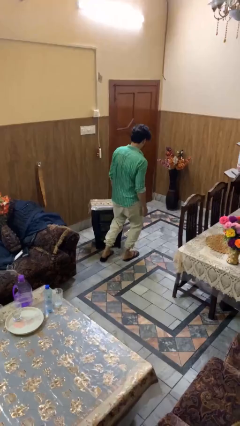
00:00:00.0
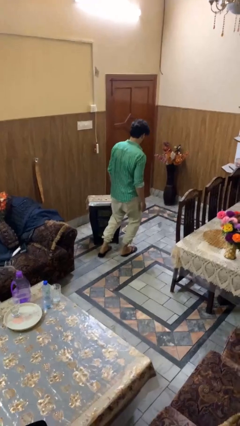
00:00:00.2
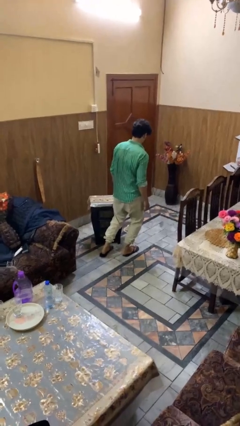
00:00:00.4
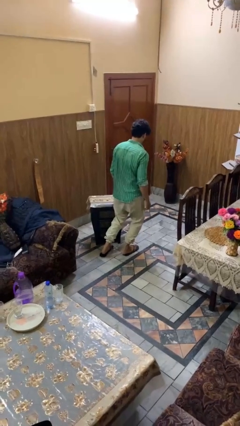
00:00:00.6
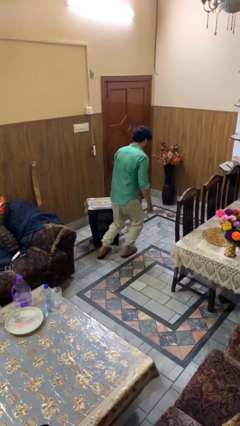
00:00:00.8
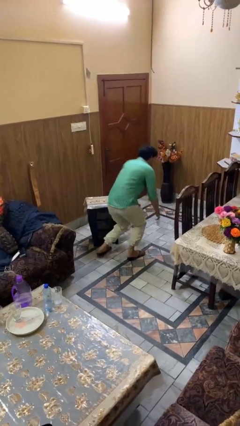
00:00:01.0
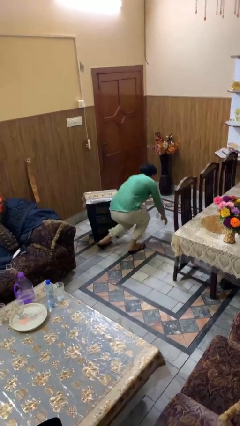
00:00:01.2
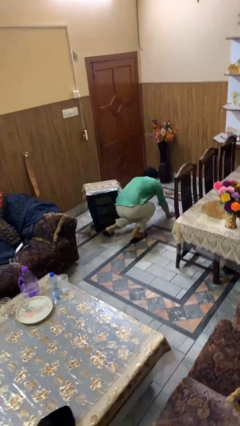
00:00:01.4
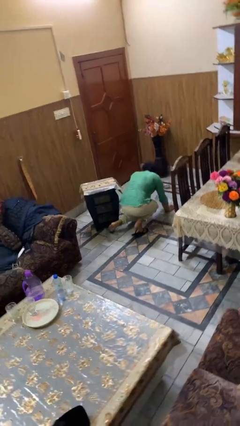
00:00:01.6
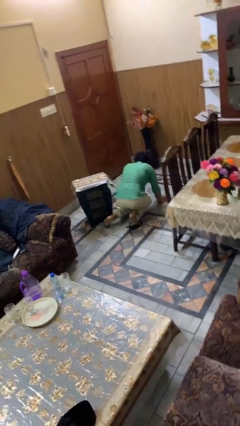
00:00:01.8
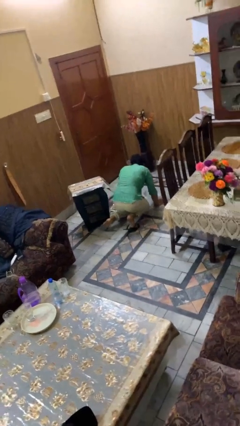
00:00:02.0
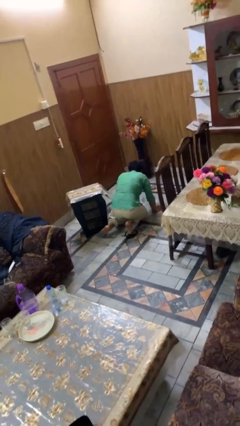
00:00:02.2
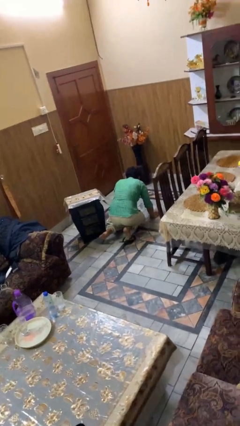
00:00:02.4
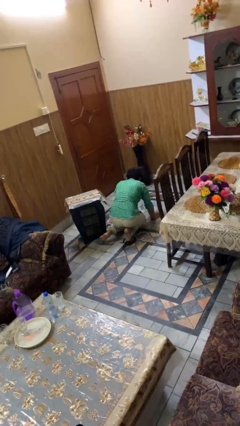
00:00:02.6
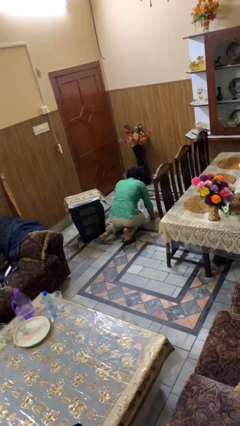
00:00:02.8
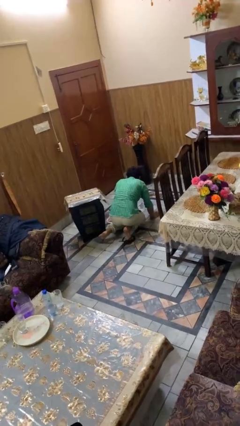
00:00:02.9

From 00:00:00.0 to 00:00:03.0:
person lies down on floor

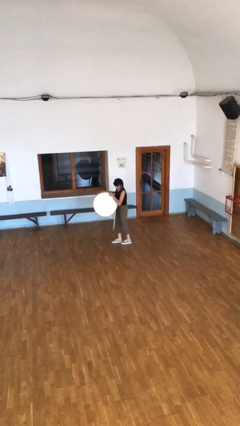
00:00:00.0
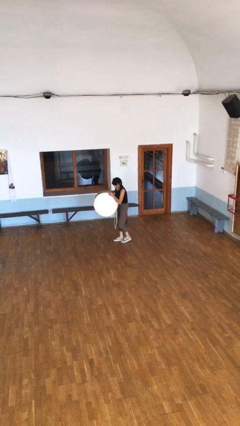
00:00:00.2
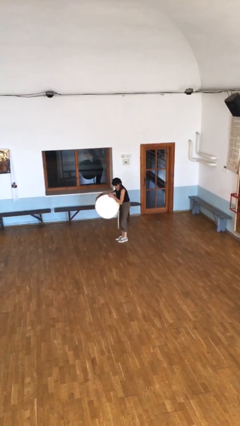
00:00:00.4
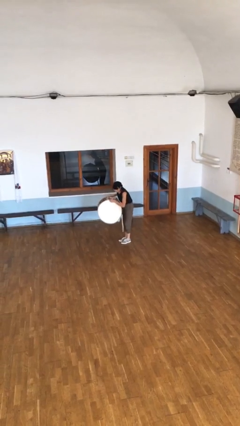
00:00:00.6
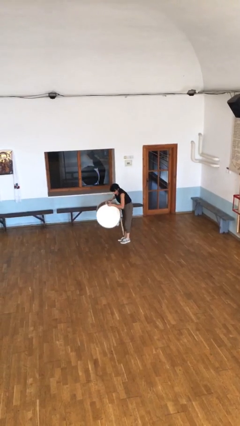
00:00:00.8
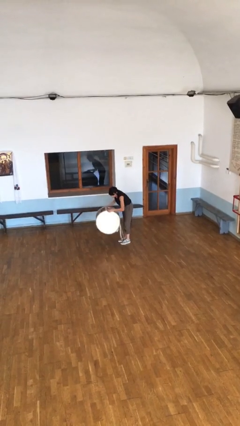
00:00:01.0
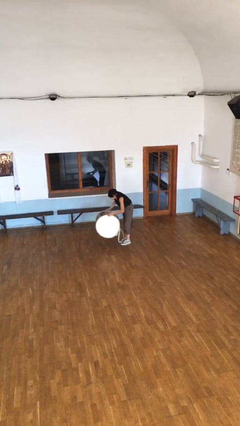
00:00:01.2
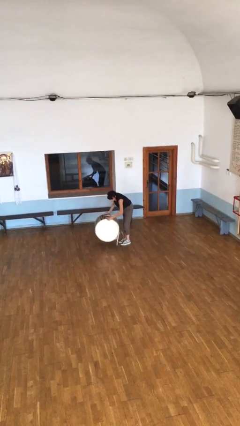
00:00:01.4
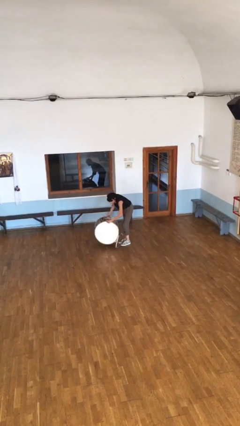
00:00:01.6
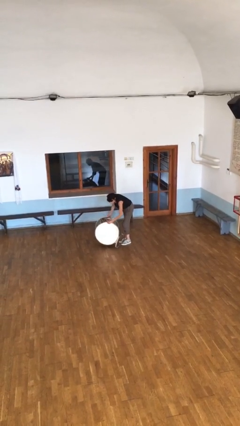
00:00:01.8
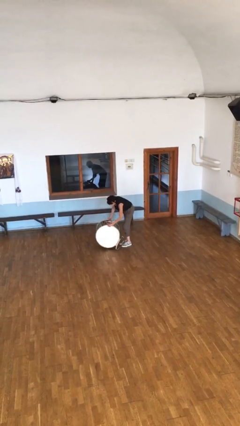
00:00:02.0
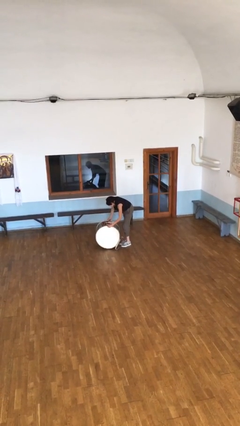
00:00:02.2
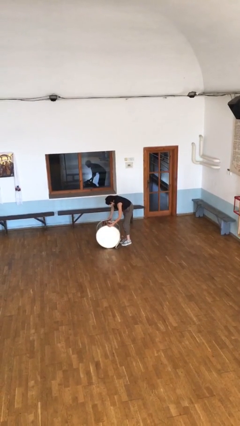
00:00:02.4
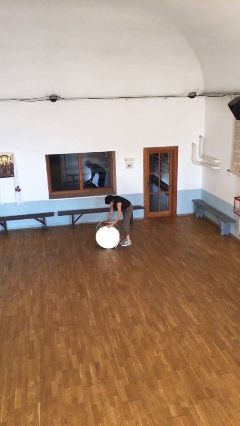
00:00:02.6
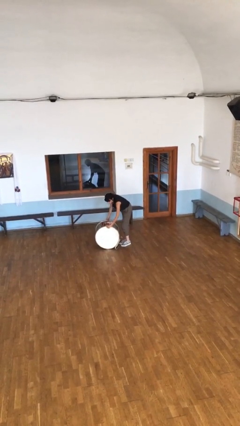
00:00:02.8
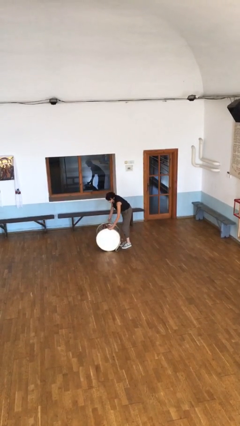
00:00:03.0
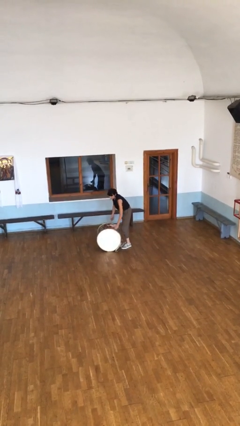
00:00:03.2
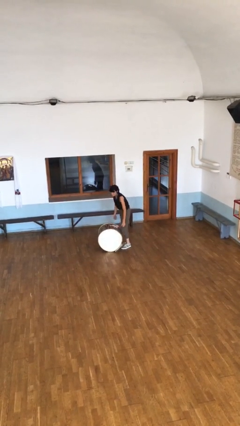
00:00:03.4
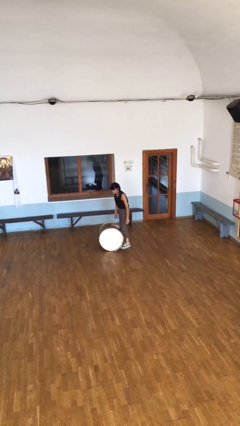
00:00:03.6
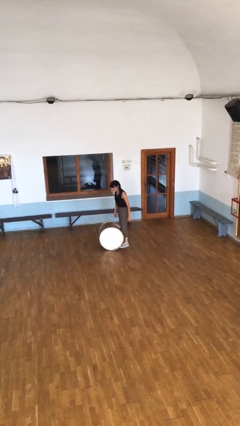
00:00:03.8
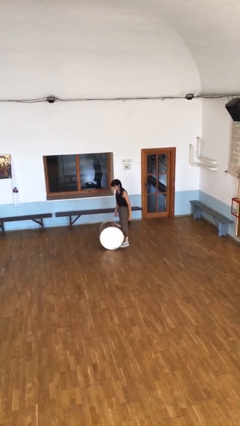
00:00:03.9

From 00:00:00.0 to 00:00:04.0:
person puts down object on floor

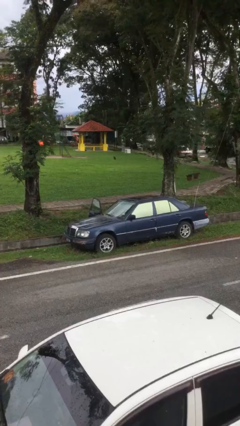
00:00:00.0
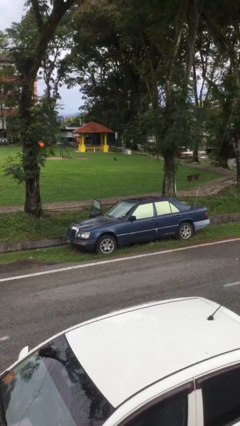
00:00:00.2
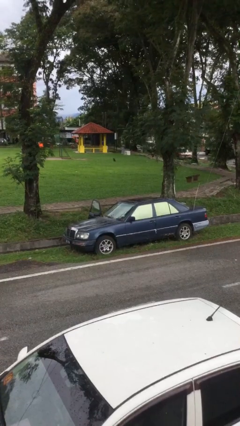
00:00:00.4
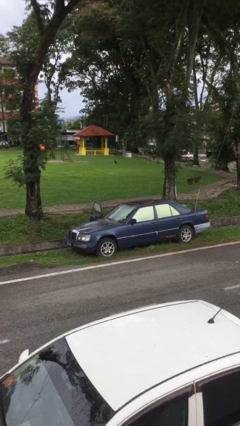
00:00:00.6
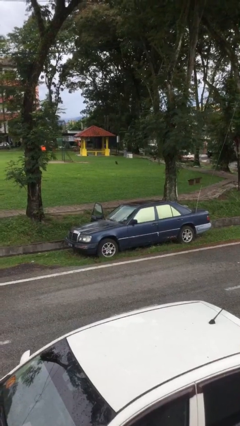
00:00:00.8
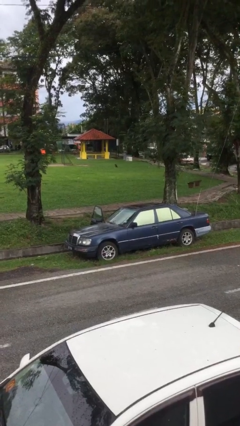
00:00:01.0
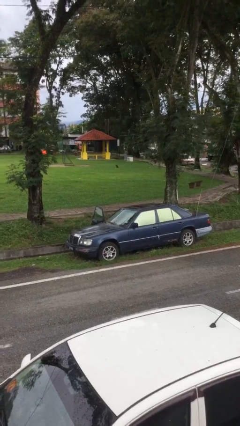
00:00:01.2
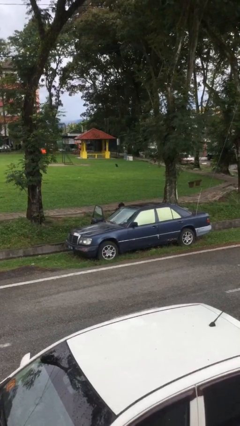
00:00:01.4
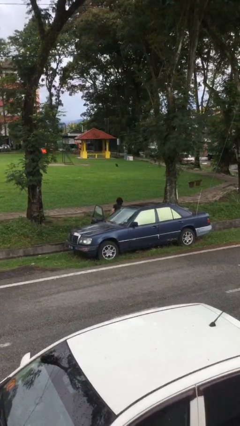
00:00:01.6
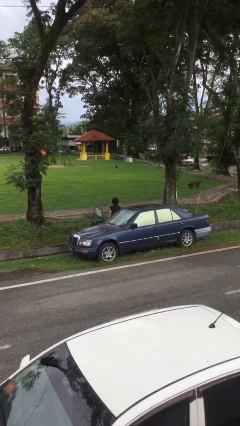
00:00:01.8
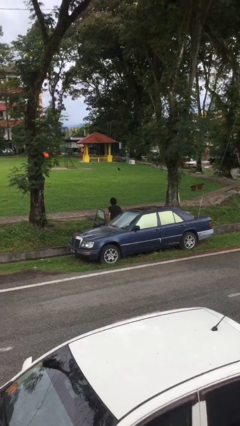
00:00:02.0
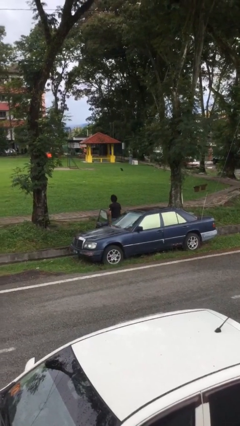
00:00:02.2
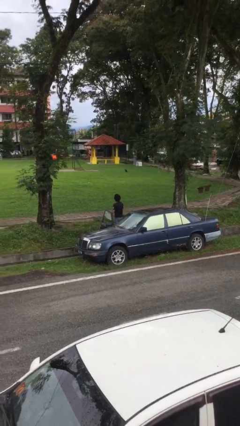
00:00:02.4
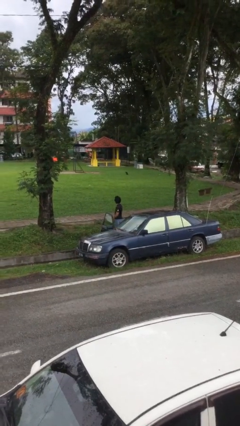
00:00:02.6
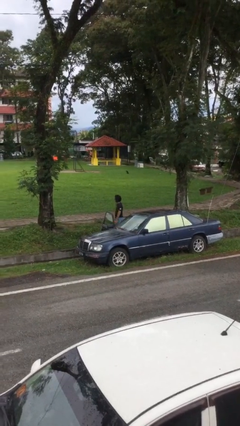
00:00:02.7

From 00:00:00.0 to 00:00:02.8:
person exits car

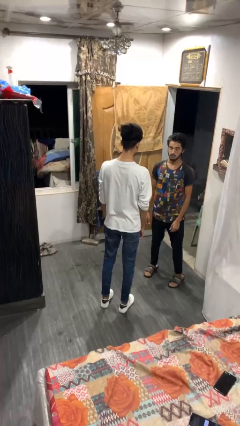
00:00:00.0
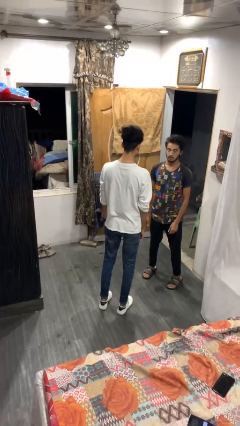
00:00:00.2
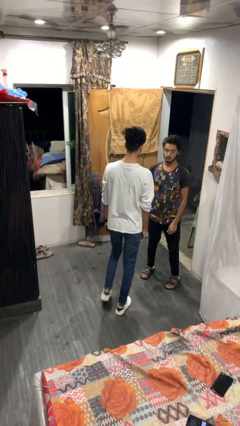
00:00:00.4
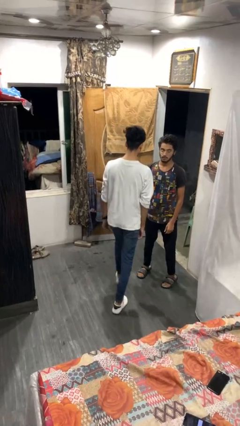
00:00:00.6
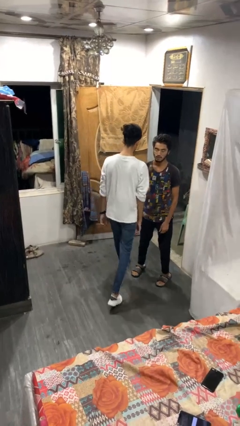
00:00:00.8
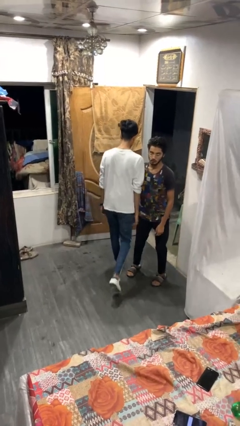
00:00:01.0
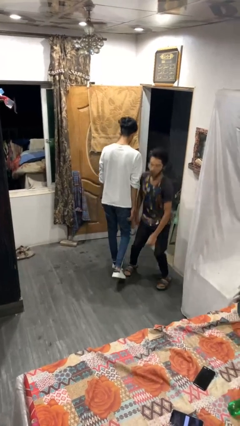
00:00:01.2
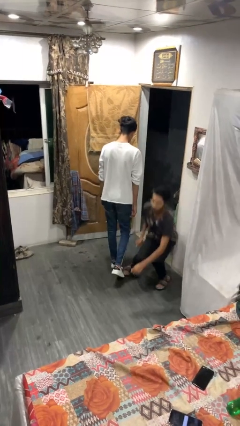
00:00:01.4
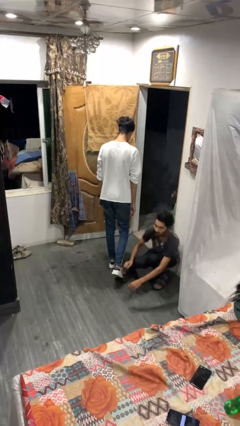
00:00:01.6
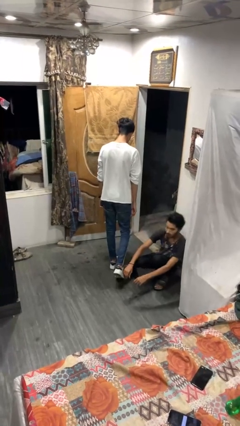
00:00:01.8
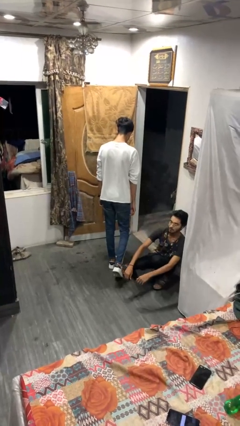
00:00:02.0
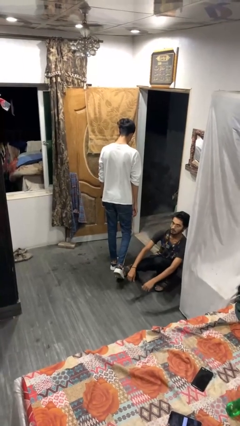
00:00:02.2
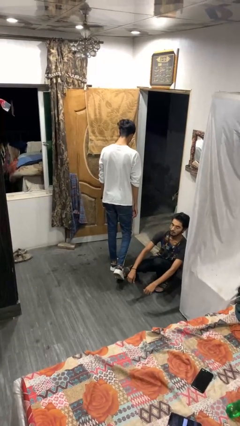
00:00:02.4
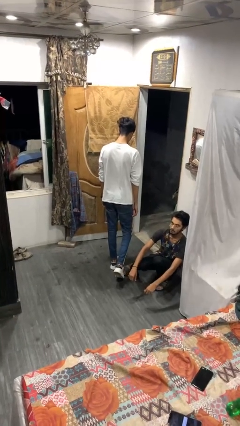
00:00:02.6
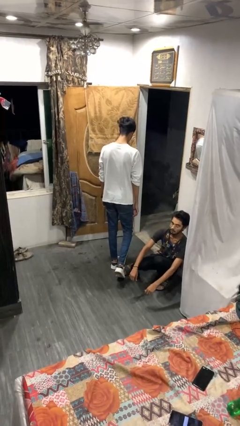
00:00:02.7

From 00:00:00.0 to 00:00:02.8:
person bumps into person

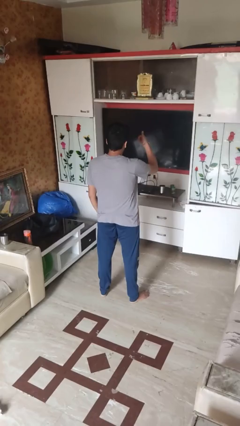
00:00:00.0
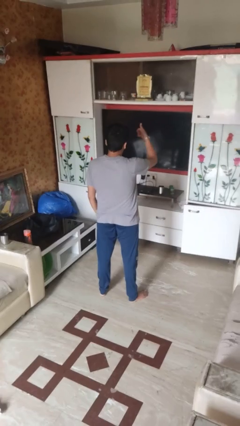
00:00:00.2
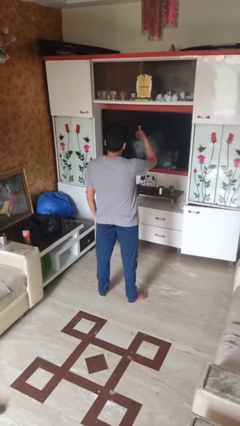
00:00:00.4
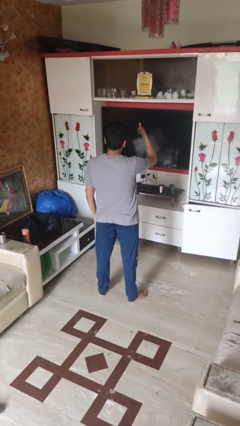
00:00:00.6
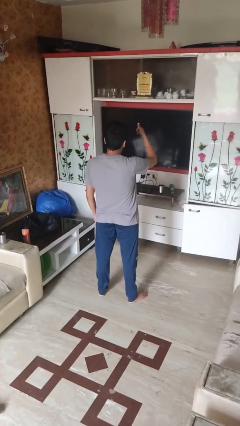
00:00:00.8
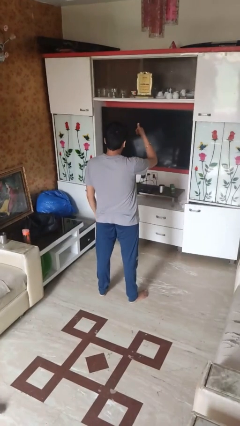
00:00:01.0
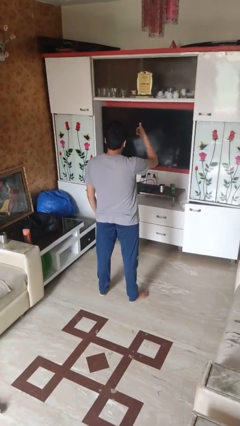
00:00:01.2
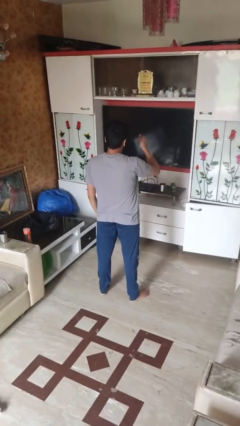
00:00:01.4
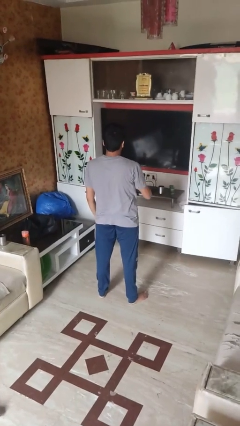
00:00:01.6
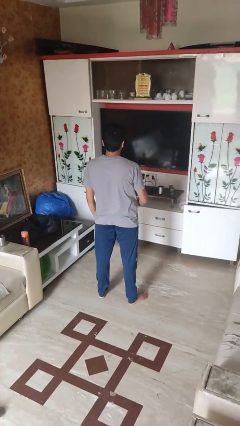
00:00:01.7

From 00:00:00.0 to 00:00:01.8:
person gestures hang loose

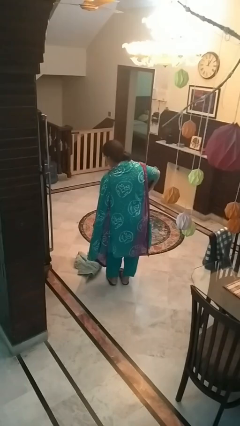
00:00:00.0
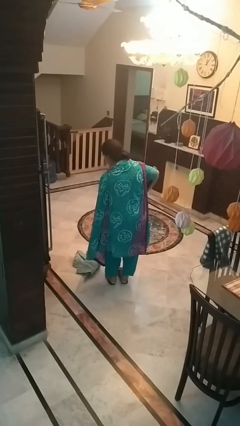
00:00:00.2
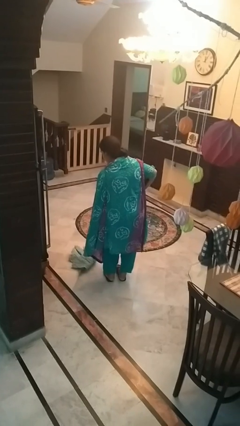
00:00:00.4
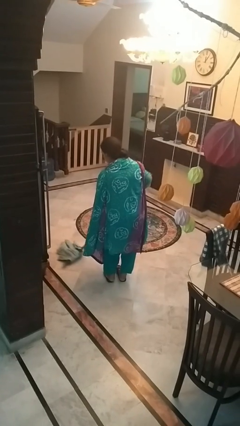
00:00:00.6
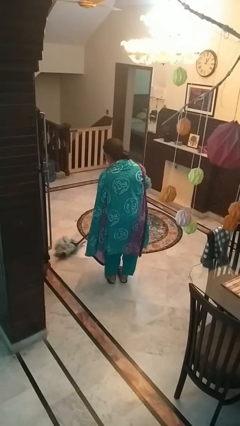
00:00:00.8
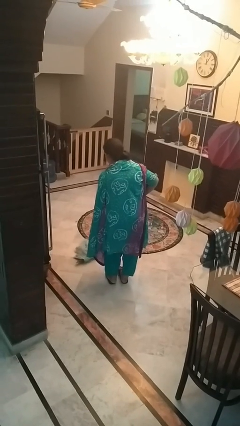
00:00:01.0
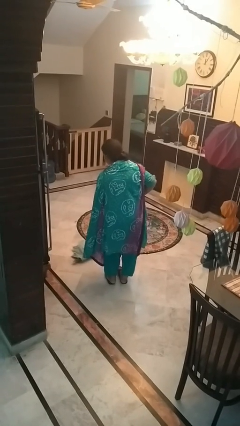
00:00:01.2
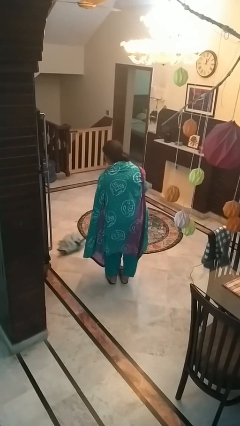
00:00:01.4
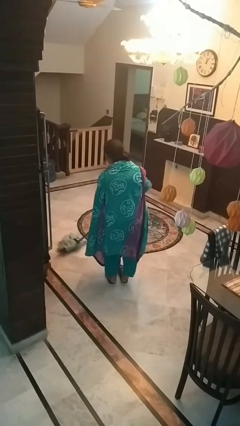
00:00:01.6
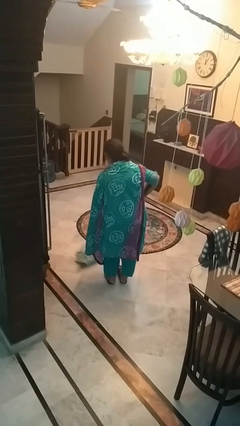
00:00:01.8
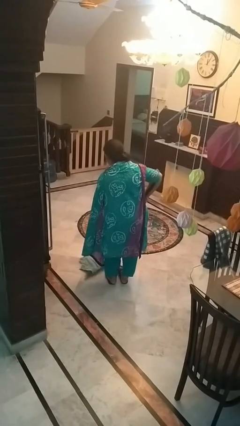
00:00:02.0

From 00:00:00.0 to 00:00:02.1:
person mops

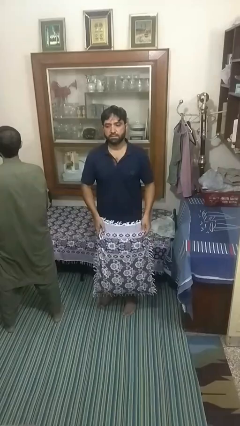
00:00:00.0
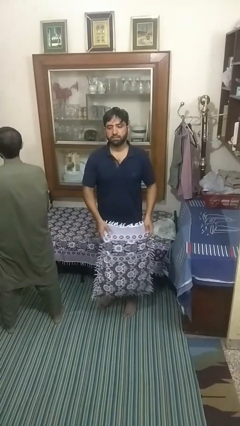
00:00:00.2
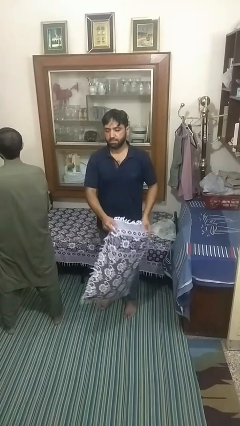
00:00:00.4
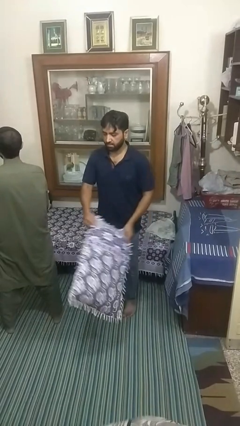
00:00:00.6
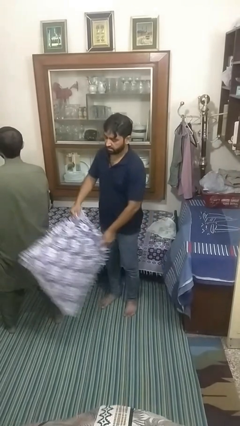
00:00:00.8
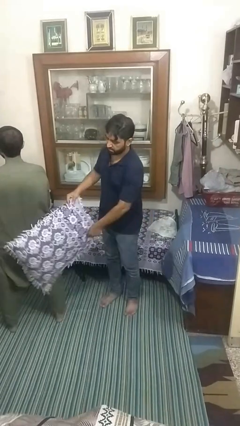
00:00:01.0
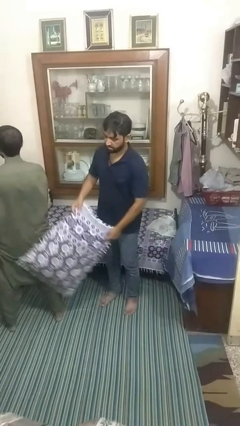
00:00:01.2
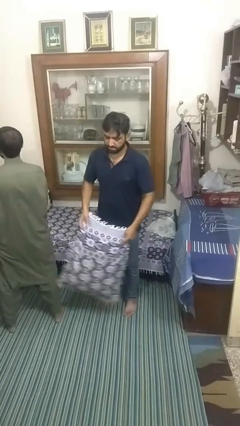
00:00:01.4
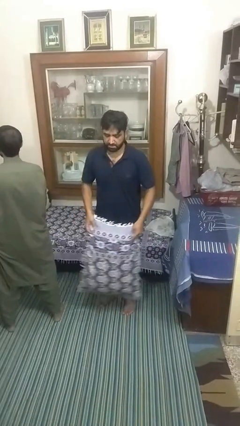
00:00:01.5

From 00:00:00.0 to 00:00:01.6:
person hits person with pillow
